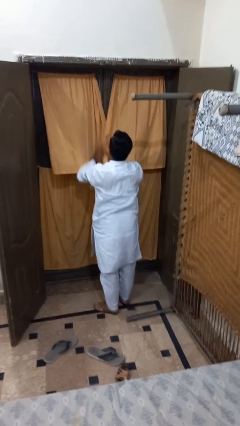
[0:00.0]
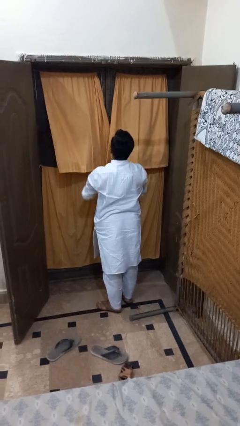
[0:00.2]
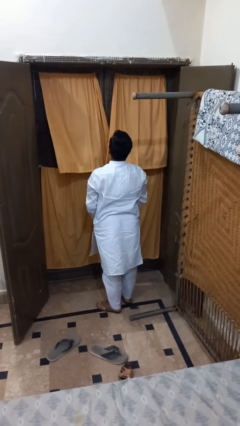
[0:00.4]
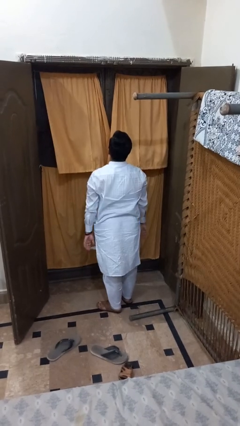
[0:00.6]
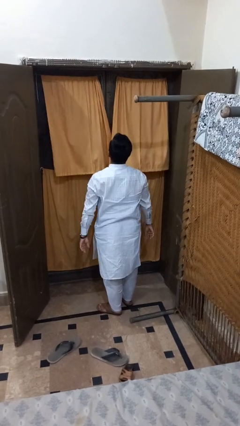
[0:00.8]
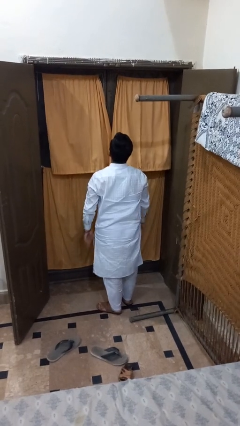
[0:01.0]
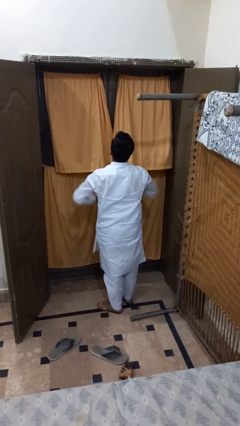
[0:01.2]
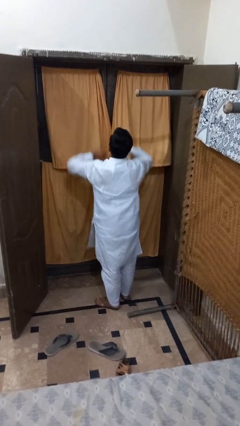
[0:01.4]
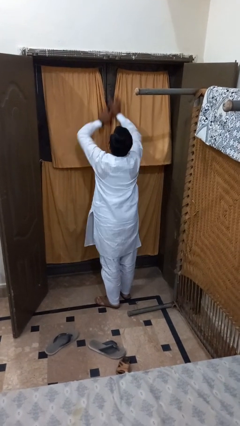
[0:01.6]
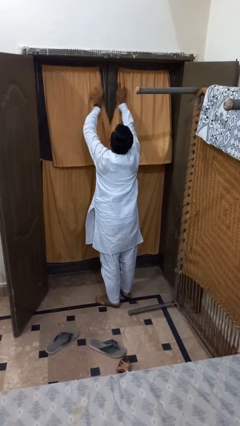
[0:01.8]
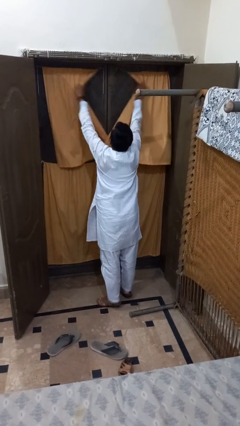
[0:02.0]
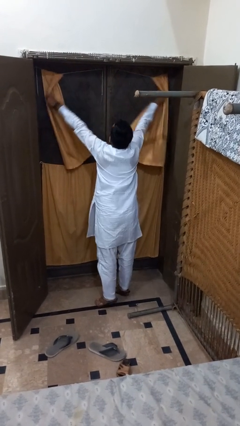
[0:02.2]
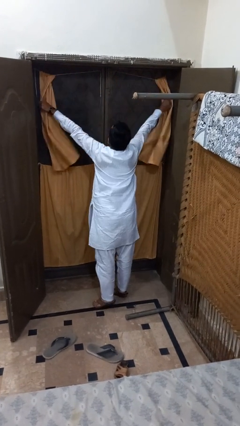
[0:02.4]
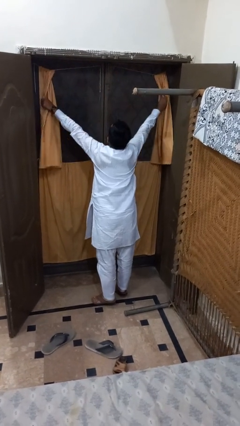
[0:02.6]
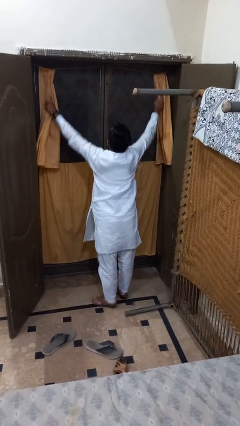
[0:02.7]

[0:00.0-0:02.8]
person opens curtains

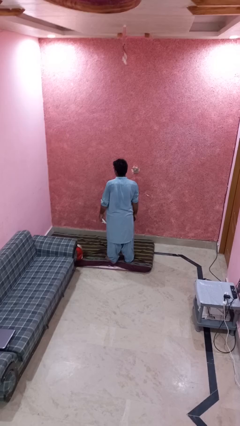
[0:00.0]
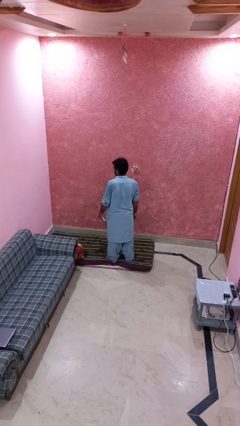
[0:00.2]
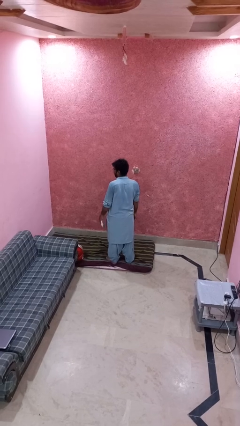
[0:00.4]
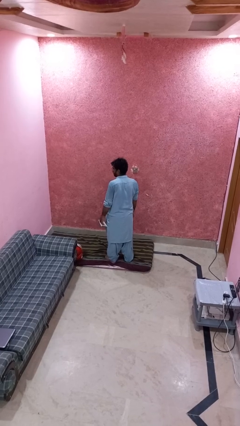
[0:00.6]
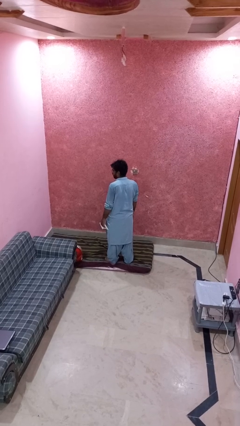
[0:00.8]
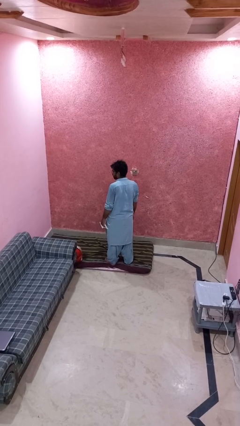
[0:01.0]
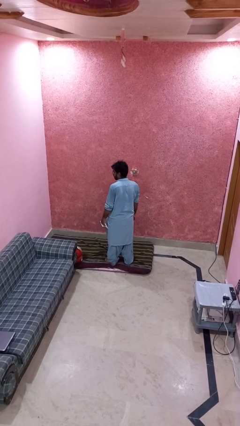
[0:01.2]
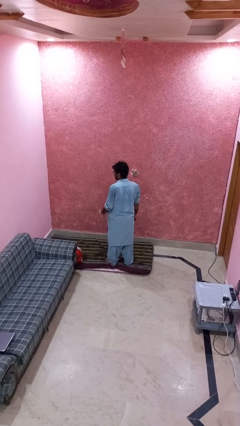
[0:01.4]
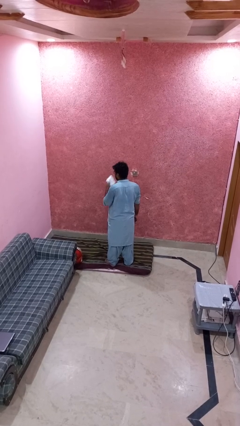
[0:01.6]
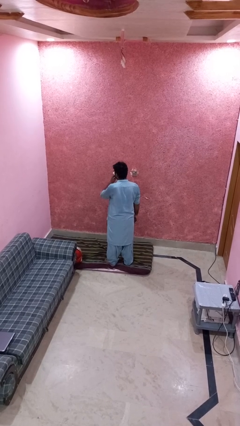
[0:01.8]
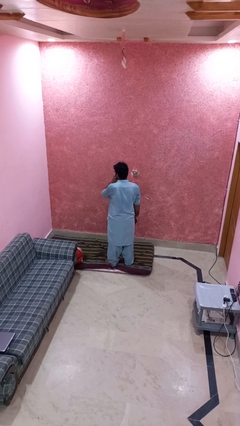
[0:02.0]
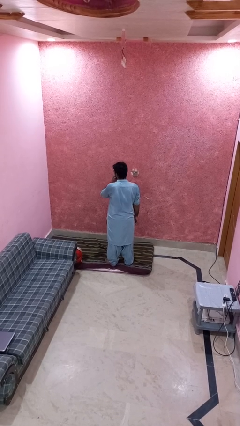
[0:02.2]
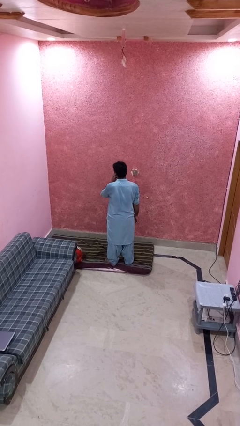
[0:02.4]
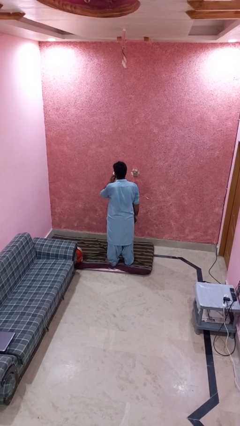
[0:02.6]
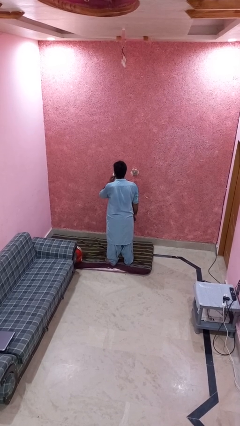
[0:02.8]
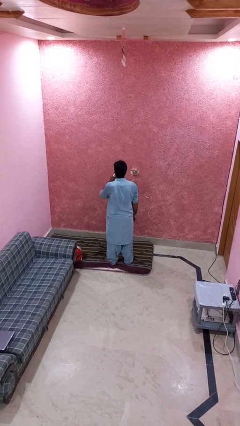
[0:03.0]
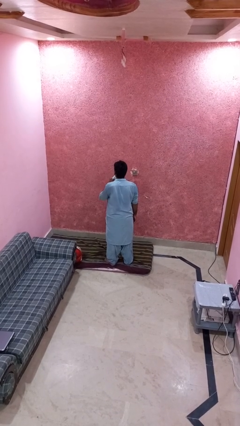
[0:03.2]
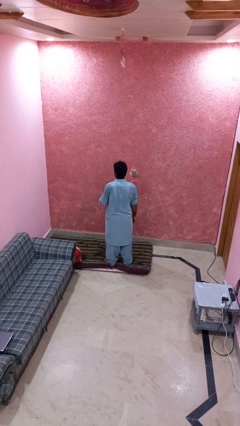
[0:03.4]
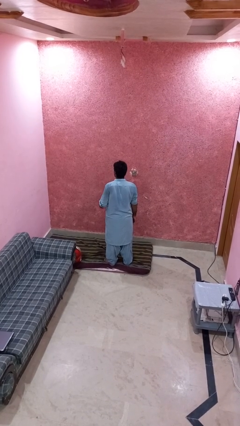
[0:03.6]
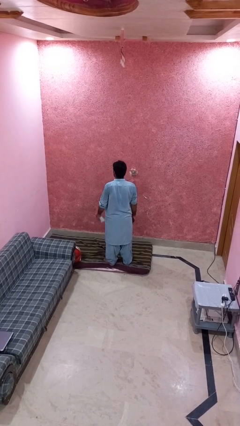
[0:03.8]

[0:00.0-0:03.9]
person wipes mouth with napkin

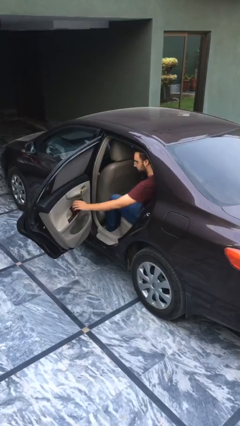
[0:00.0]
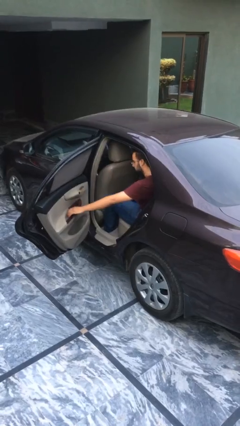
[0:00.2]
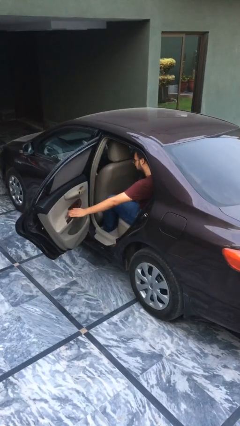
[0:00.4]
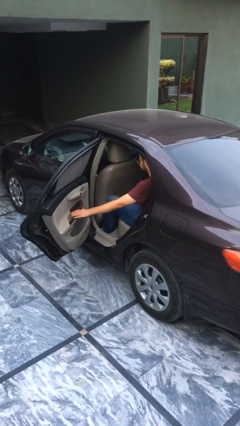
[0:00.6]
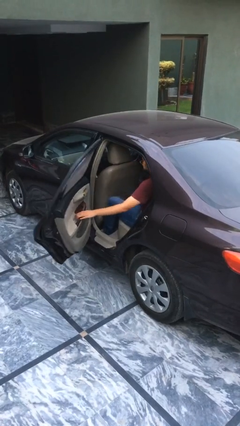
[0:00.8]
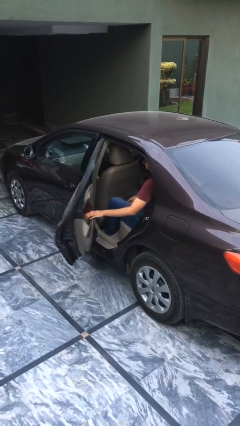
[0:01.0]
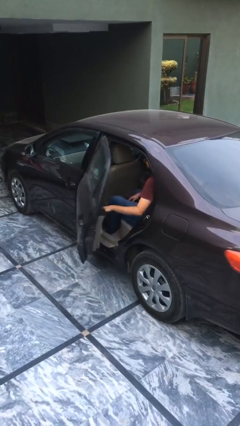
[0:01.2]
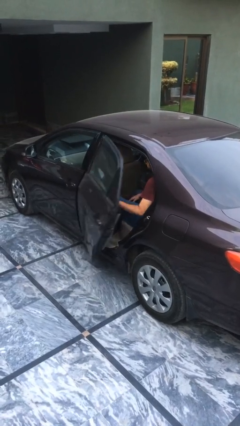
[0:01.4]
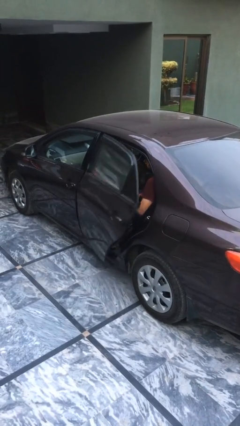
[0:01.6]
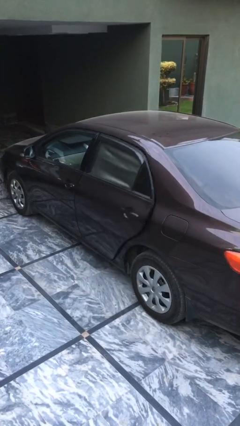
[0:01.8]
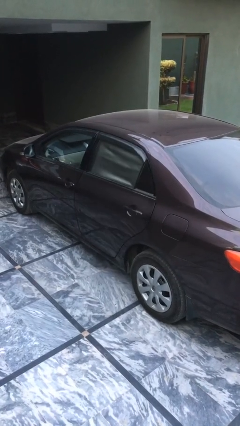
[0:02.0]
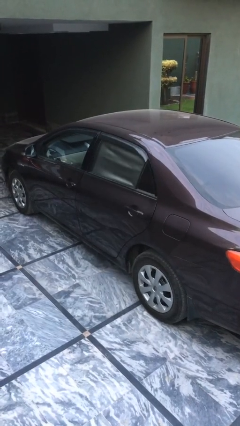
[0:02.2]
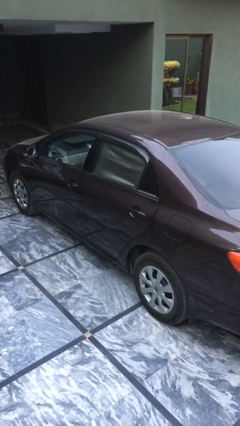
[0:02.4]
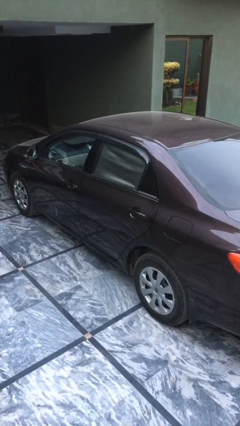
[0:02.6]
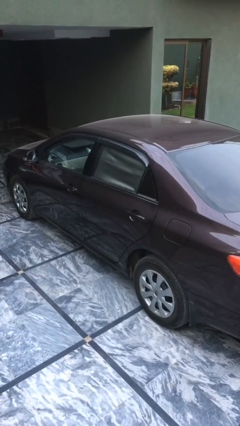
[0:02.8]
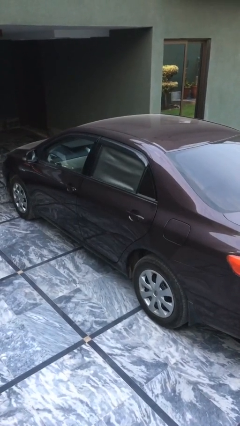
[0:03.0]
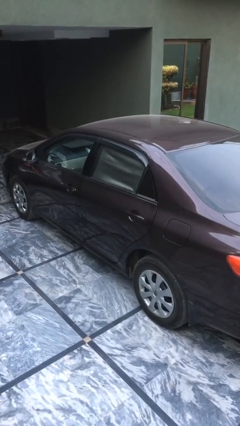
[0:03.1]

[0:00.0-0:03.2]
person closes car door

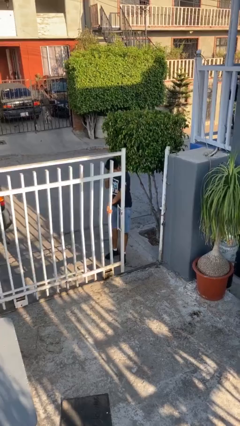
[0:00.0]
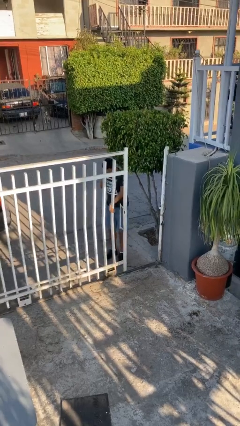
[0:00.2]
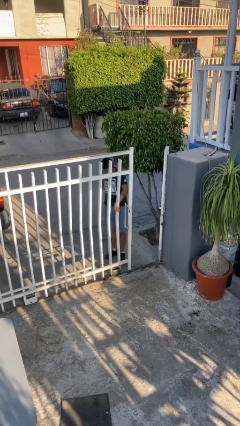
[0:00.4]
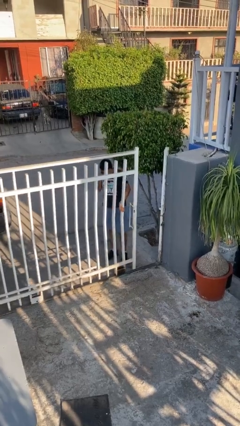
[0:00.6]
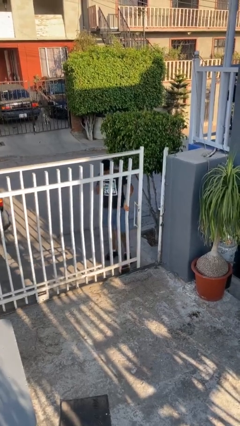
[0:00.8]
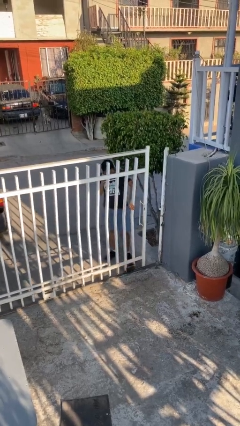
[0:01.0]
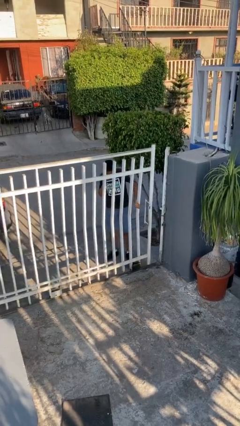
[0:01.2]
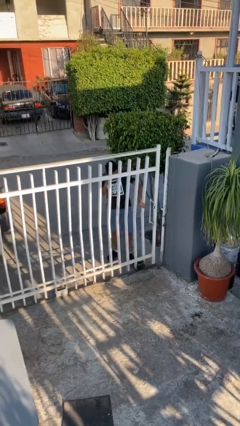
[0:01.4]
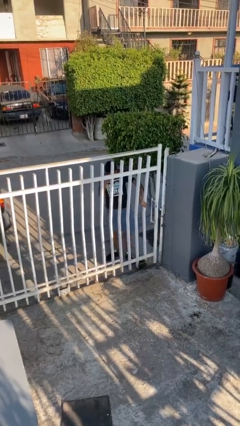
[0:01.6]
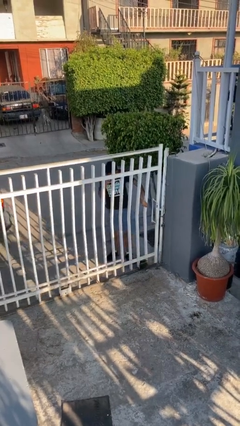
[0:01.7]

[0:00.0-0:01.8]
person closes facility door

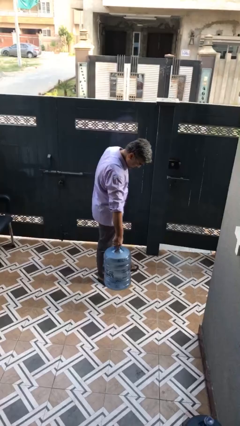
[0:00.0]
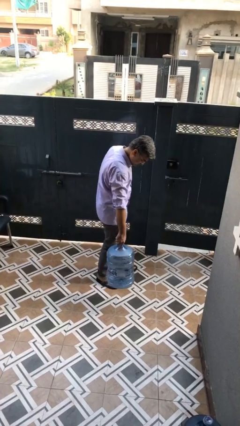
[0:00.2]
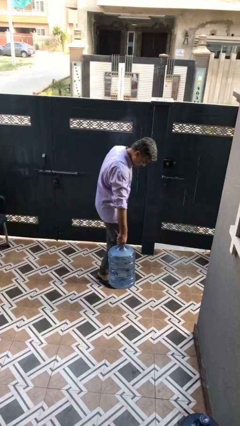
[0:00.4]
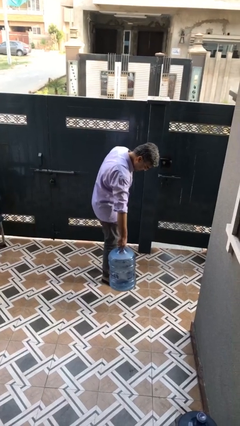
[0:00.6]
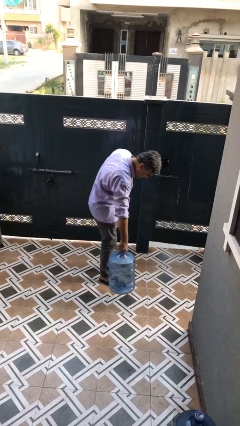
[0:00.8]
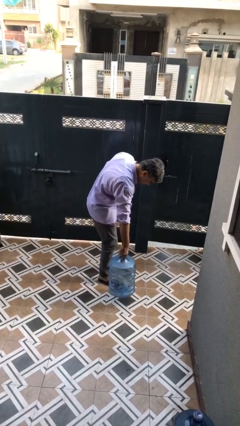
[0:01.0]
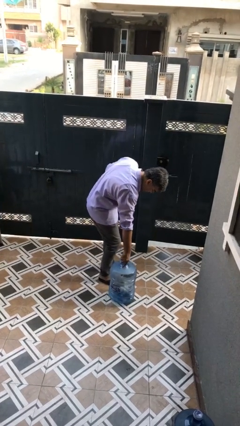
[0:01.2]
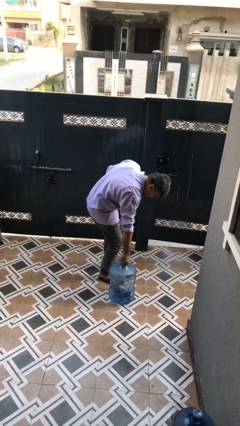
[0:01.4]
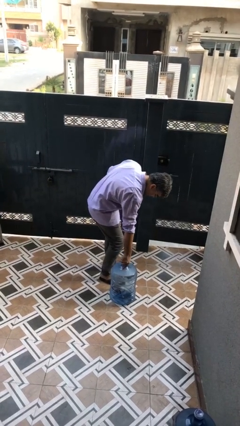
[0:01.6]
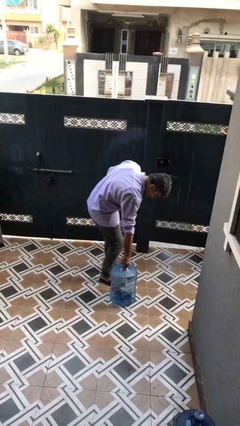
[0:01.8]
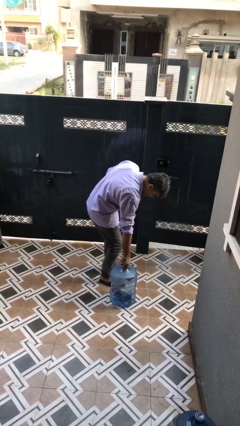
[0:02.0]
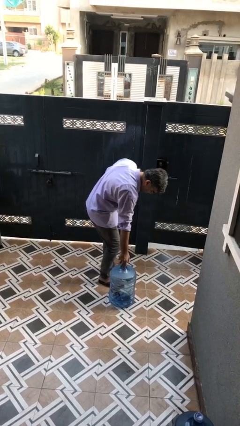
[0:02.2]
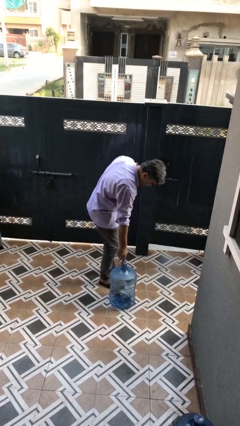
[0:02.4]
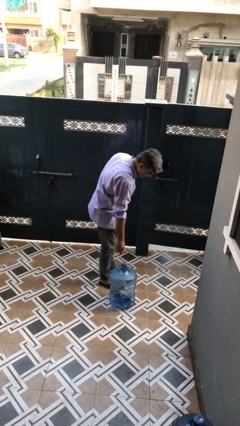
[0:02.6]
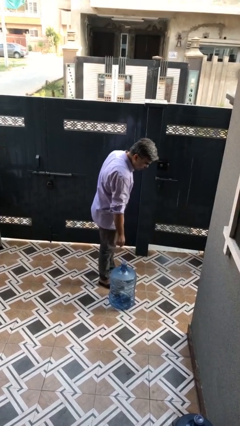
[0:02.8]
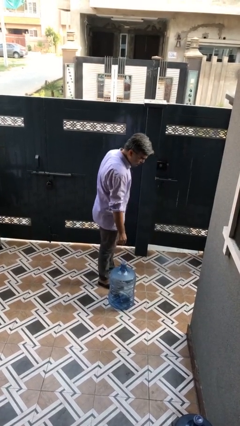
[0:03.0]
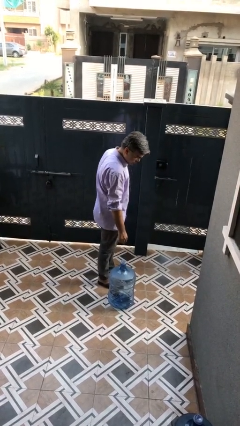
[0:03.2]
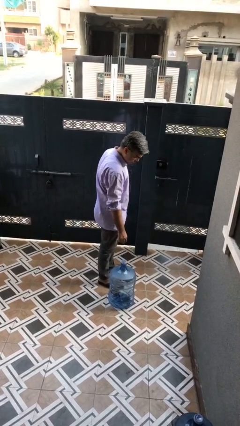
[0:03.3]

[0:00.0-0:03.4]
person puts down object on floor

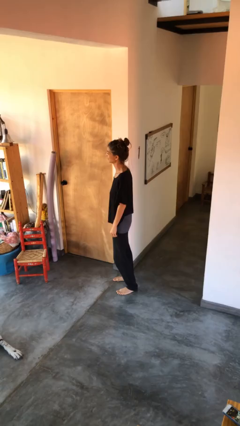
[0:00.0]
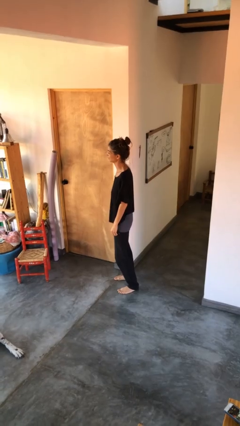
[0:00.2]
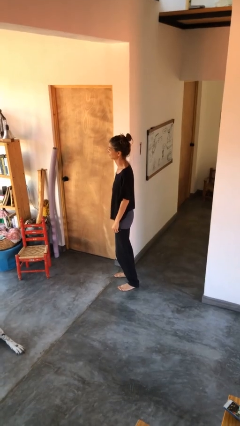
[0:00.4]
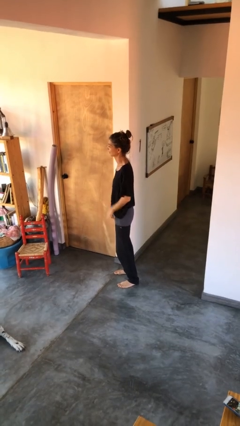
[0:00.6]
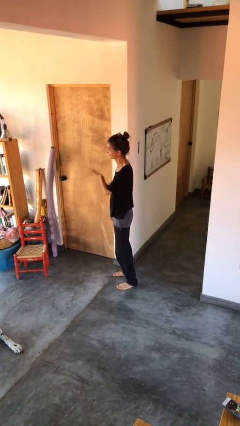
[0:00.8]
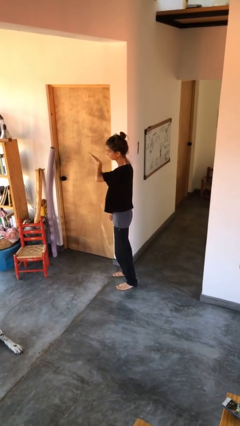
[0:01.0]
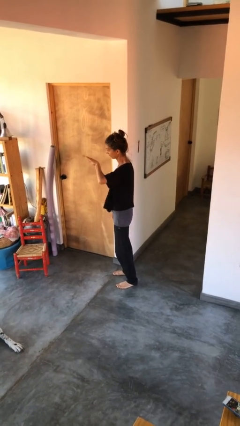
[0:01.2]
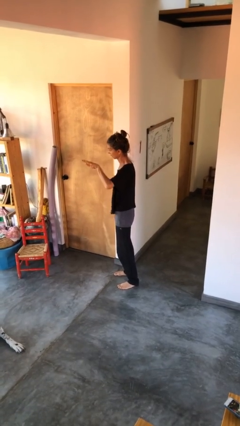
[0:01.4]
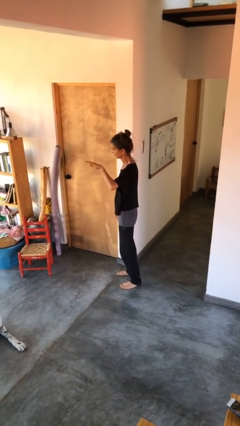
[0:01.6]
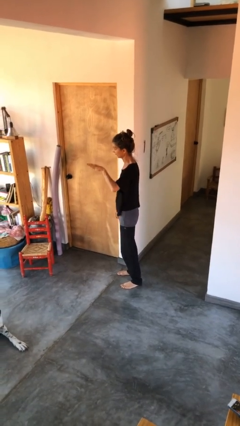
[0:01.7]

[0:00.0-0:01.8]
person gestures swipe left

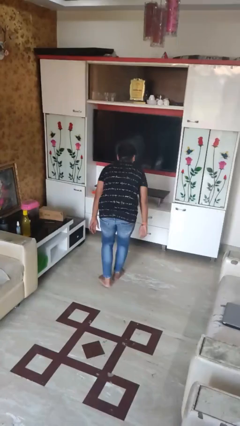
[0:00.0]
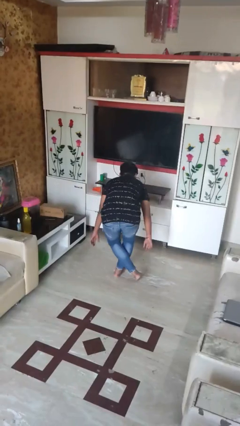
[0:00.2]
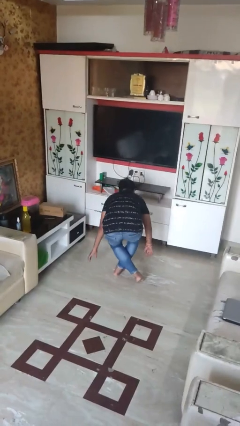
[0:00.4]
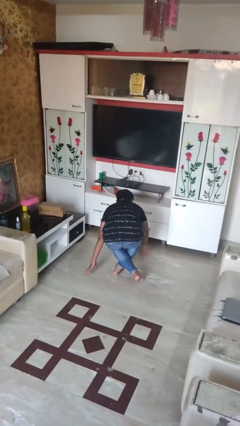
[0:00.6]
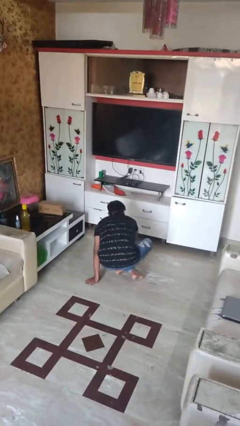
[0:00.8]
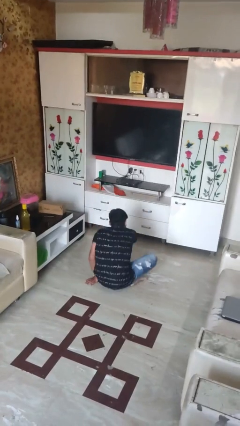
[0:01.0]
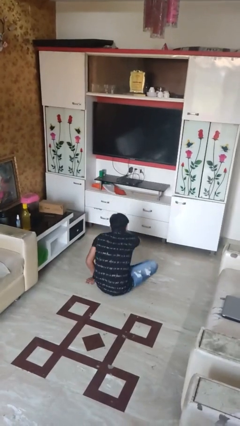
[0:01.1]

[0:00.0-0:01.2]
person sits crisscross
